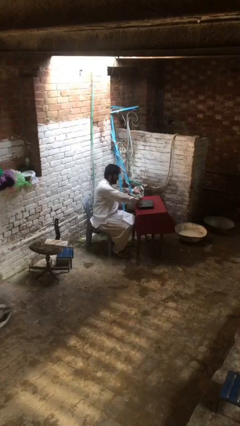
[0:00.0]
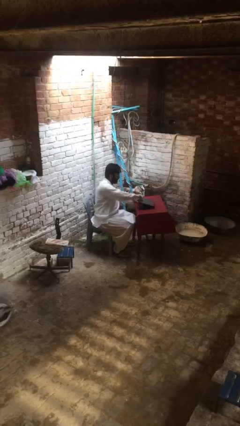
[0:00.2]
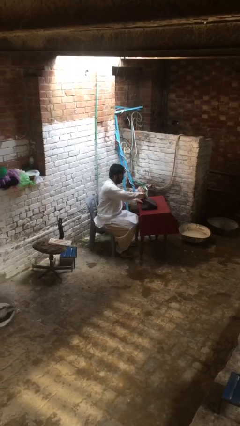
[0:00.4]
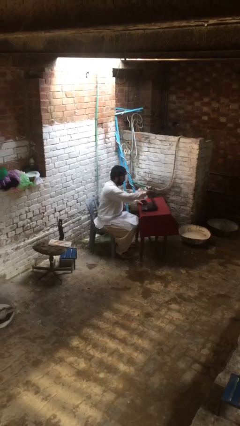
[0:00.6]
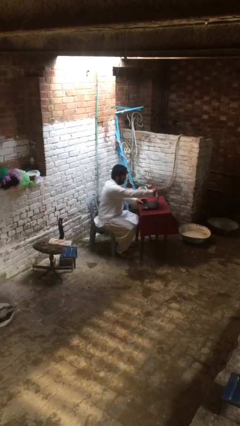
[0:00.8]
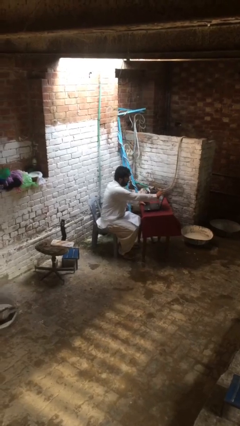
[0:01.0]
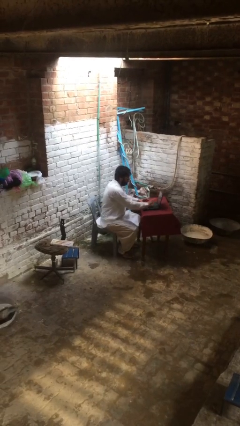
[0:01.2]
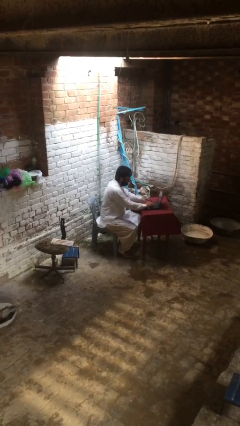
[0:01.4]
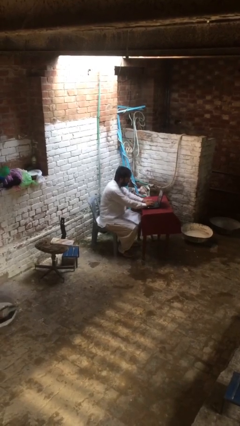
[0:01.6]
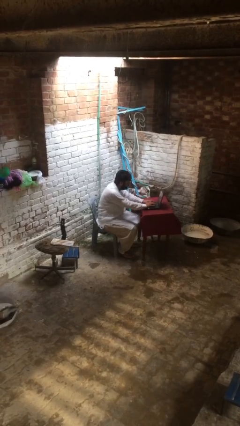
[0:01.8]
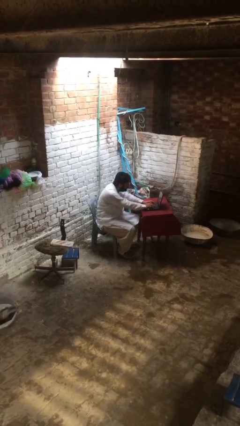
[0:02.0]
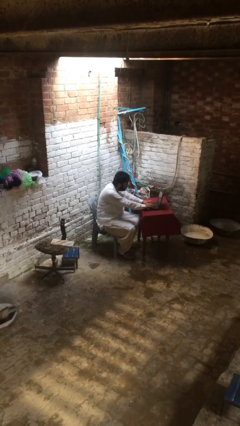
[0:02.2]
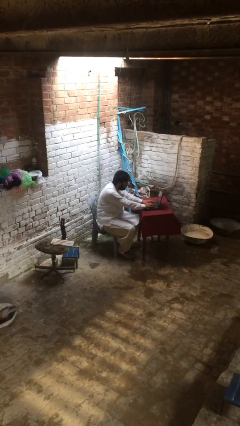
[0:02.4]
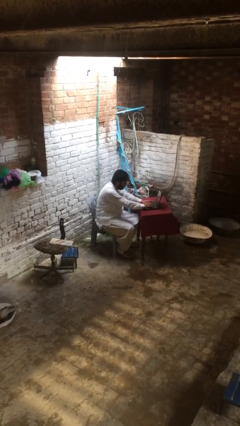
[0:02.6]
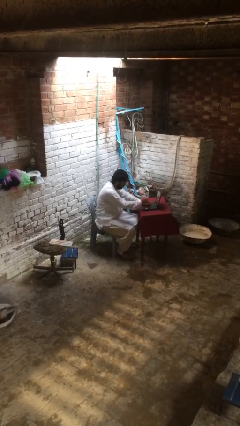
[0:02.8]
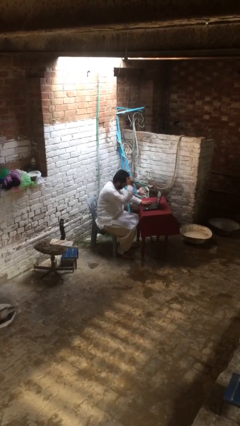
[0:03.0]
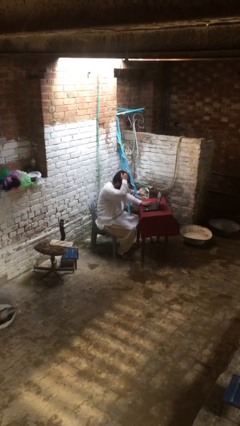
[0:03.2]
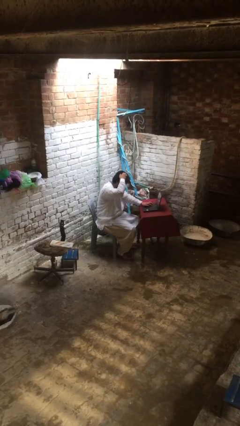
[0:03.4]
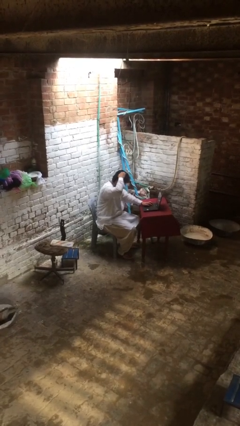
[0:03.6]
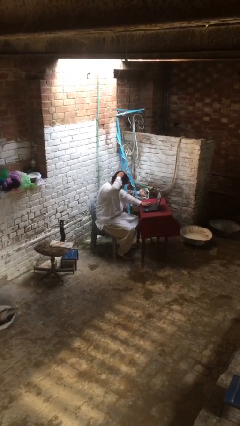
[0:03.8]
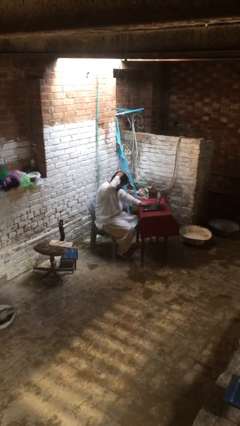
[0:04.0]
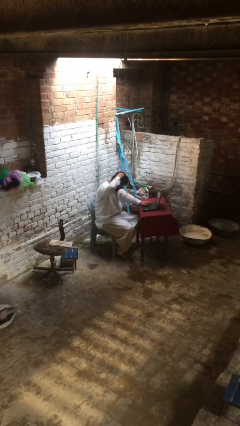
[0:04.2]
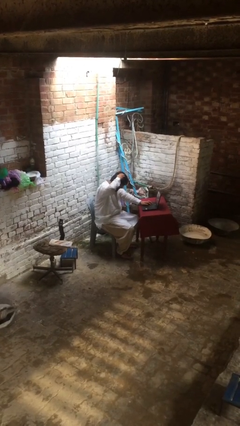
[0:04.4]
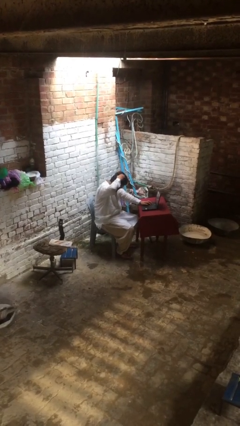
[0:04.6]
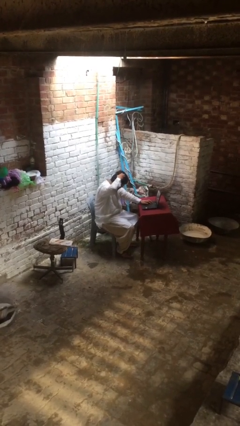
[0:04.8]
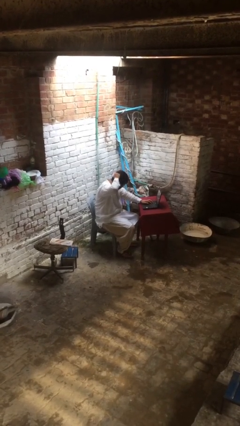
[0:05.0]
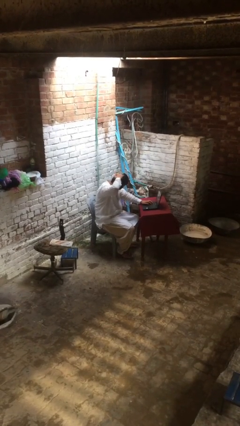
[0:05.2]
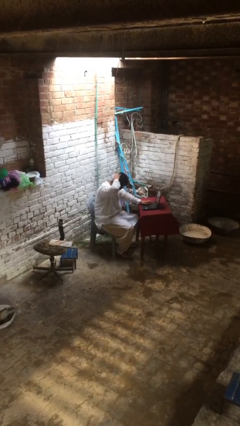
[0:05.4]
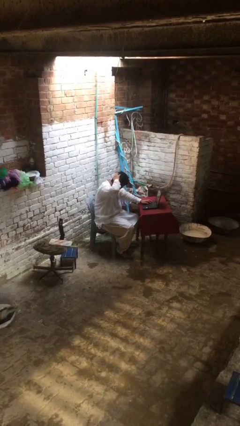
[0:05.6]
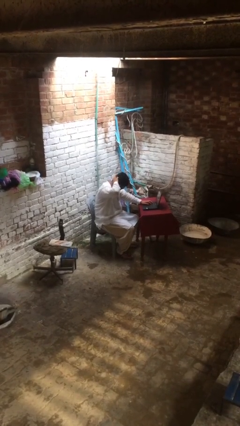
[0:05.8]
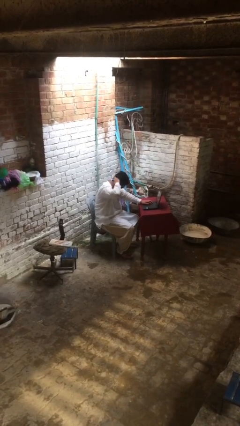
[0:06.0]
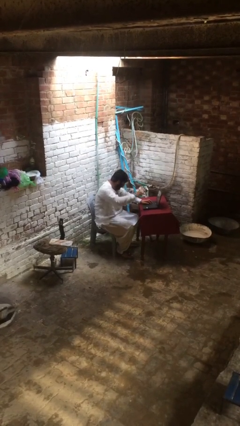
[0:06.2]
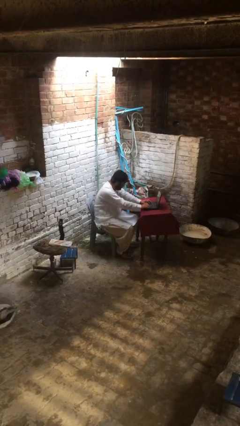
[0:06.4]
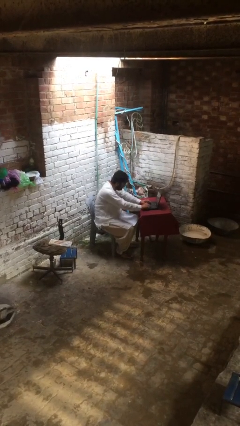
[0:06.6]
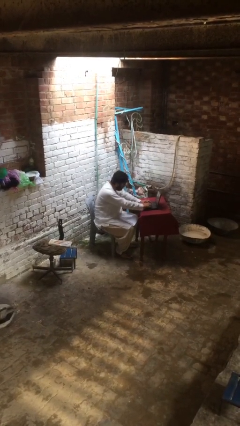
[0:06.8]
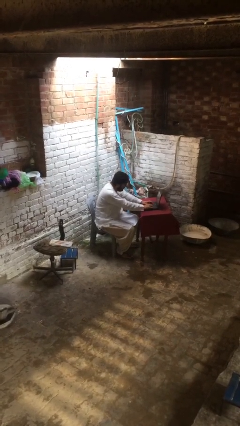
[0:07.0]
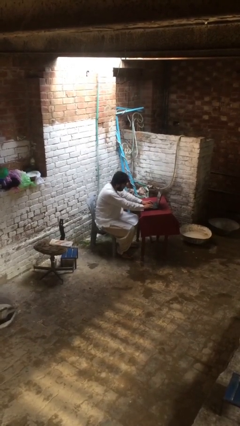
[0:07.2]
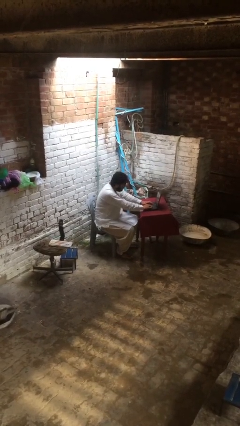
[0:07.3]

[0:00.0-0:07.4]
person interacts with laptop

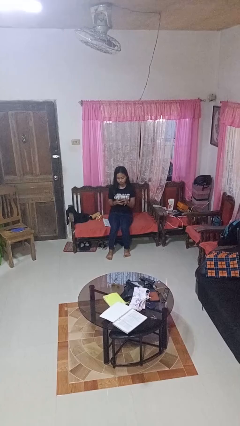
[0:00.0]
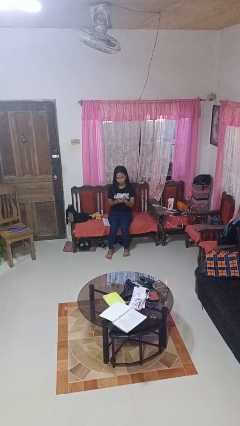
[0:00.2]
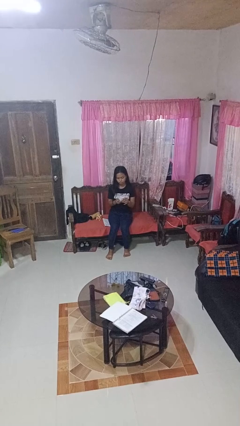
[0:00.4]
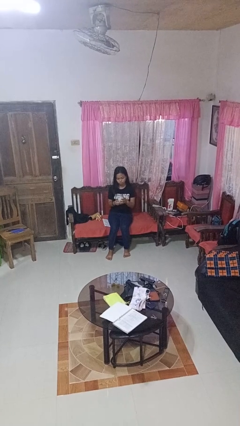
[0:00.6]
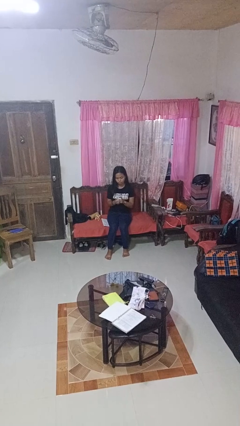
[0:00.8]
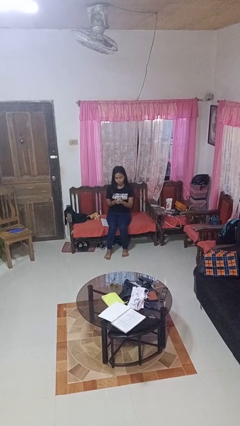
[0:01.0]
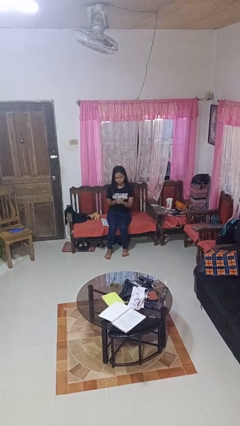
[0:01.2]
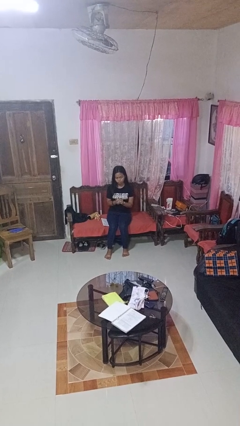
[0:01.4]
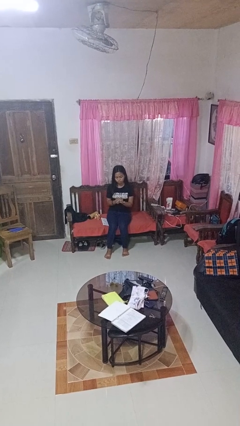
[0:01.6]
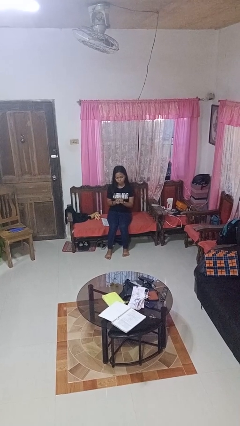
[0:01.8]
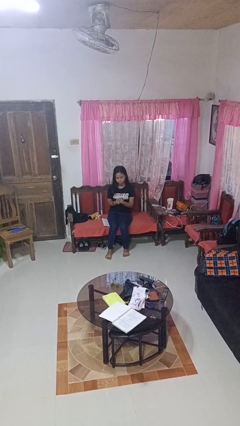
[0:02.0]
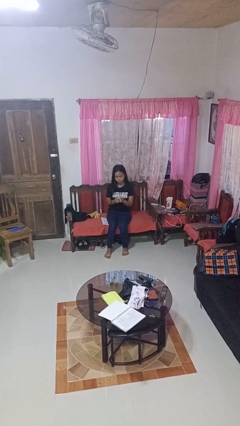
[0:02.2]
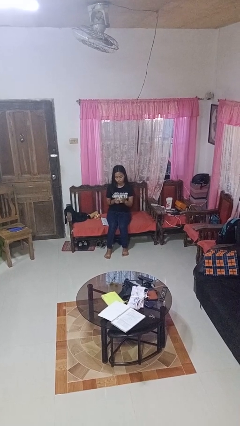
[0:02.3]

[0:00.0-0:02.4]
person crumples paper

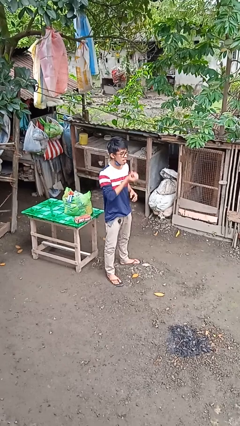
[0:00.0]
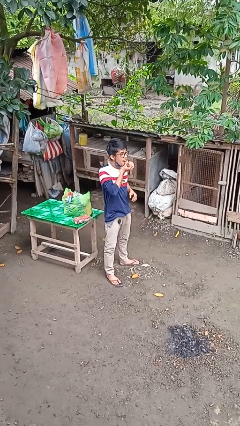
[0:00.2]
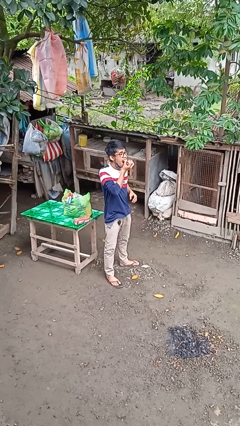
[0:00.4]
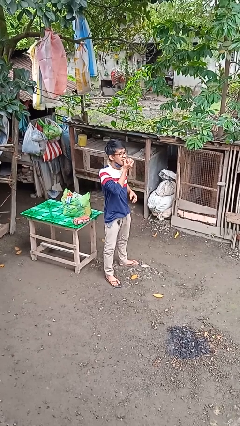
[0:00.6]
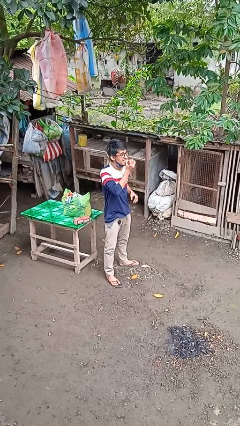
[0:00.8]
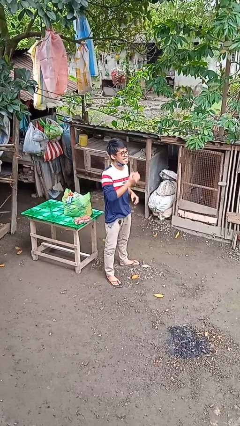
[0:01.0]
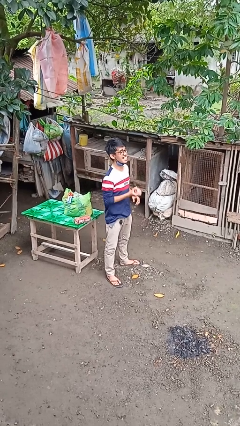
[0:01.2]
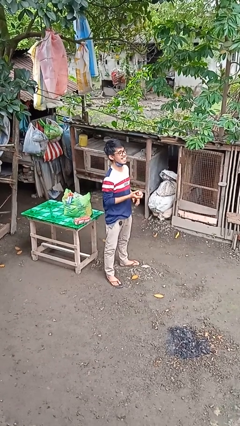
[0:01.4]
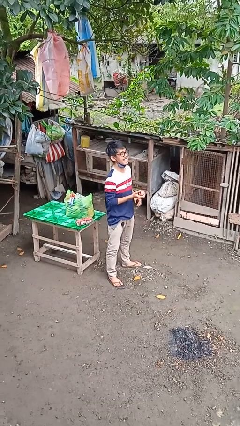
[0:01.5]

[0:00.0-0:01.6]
person eats apple

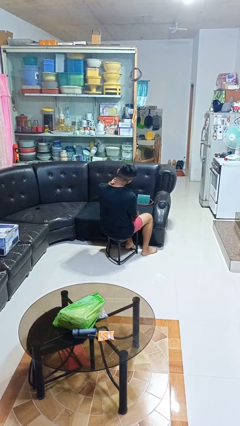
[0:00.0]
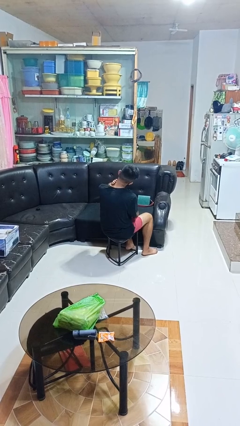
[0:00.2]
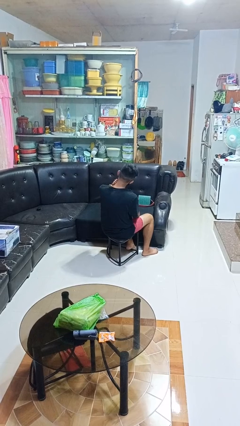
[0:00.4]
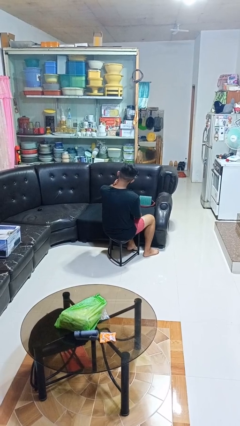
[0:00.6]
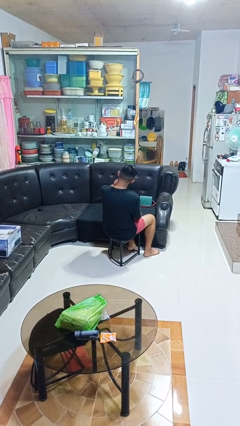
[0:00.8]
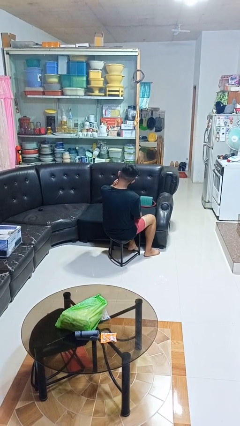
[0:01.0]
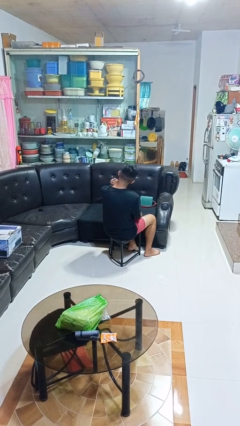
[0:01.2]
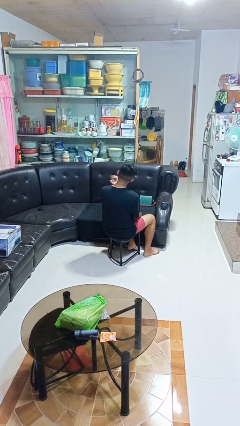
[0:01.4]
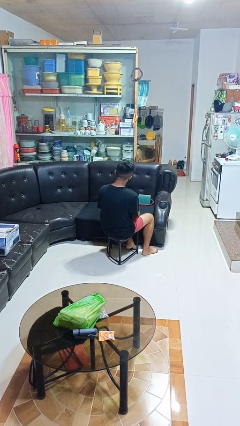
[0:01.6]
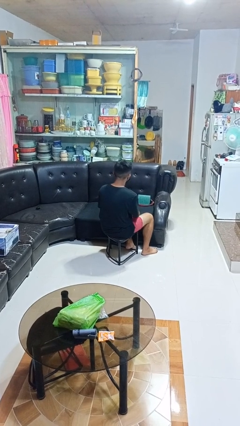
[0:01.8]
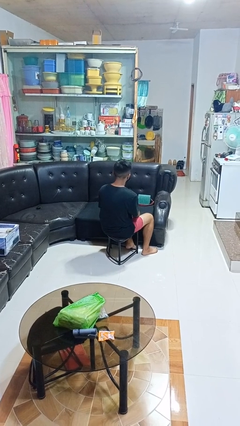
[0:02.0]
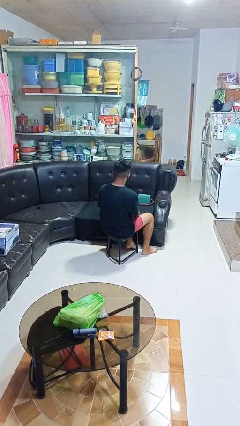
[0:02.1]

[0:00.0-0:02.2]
person swats bug

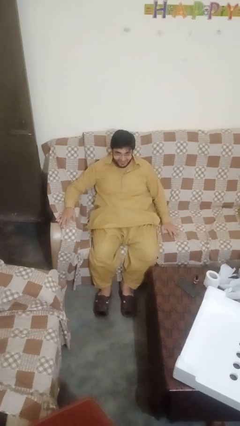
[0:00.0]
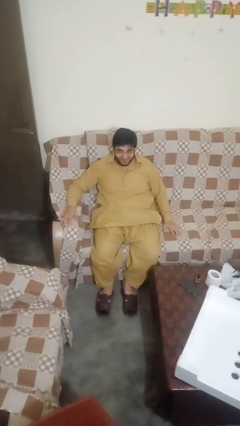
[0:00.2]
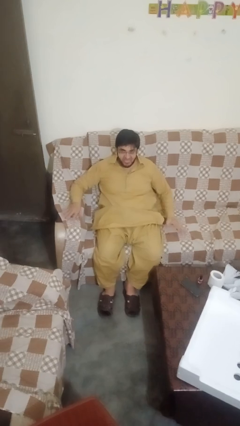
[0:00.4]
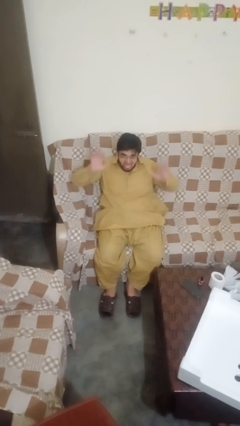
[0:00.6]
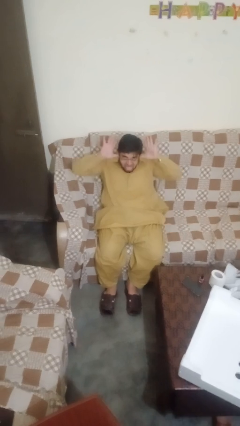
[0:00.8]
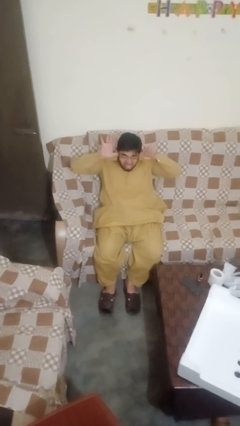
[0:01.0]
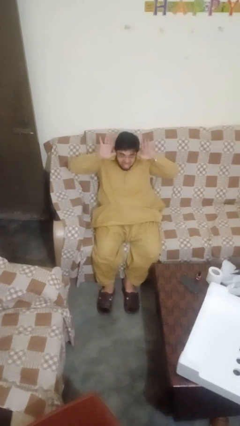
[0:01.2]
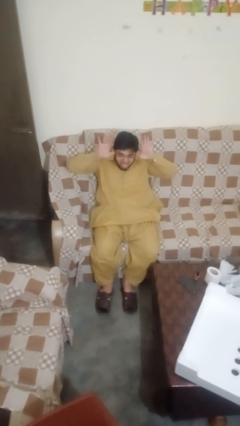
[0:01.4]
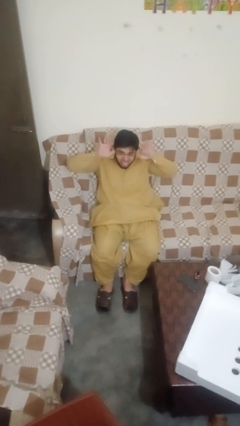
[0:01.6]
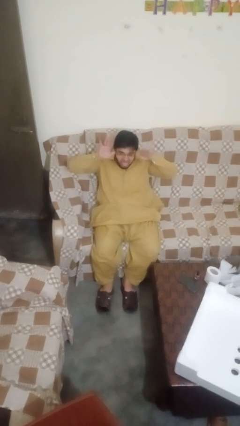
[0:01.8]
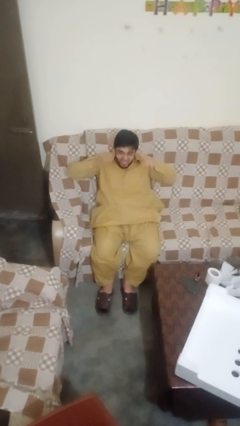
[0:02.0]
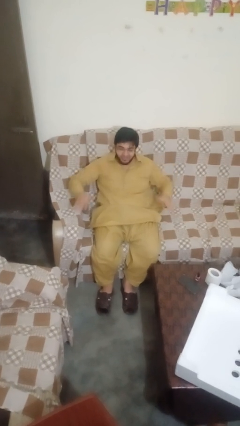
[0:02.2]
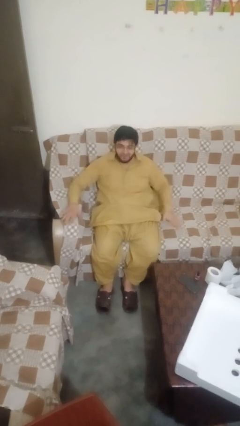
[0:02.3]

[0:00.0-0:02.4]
person sticks out tongue

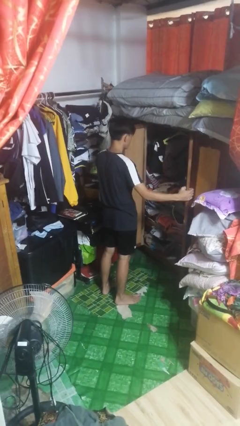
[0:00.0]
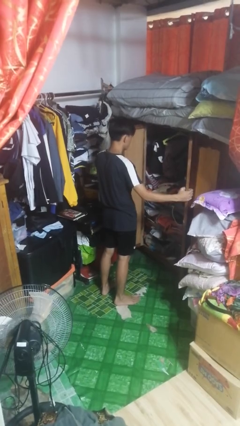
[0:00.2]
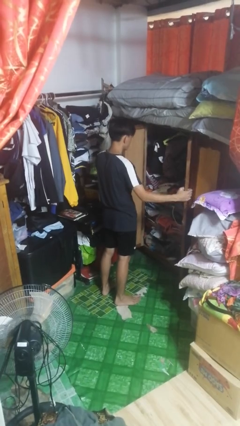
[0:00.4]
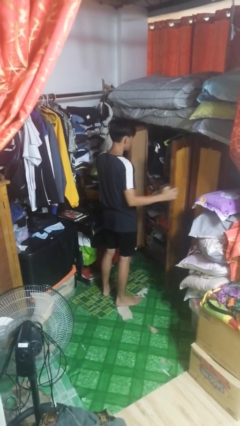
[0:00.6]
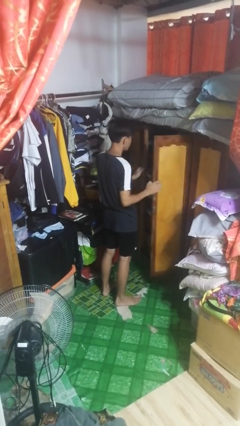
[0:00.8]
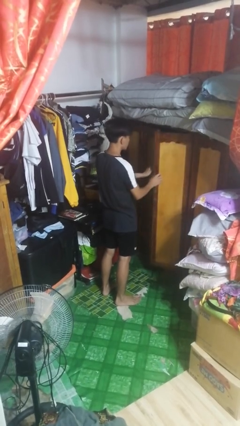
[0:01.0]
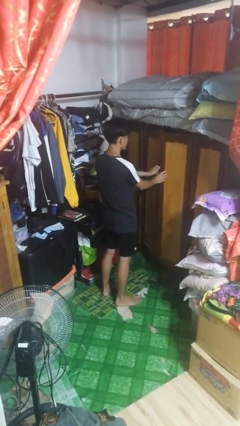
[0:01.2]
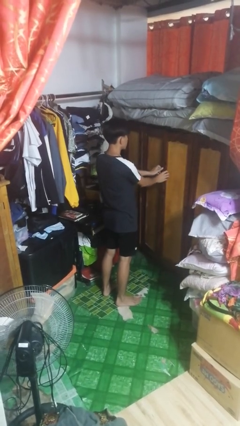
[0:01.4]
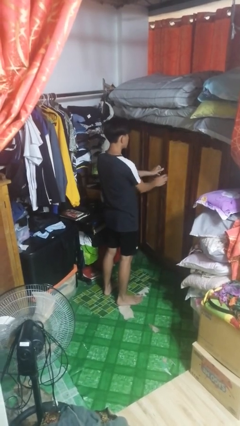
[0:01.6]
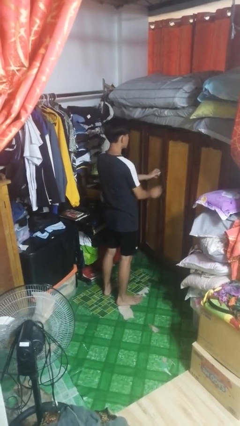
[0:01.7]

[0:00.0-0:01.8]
person closes dresser drawer
